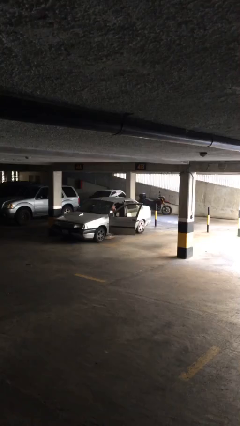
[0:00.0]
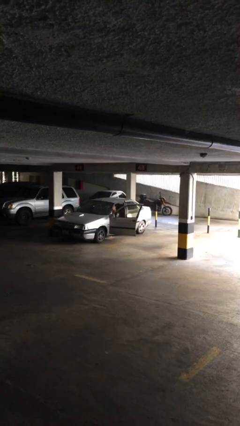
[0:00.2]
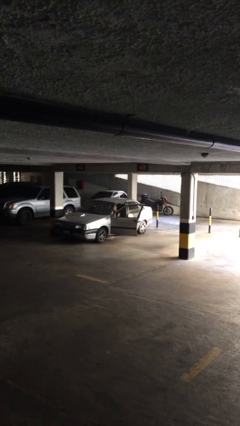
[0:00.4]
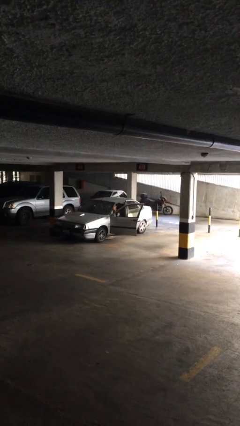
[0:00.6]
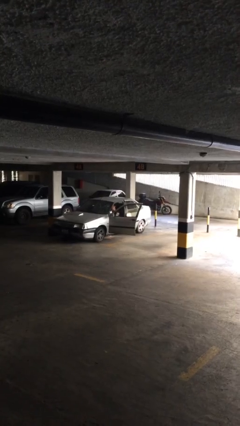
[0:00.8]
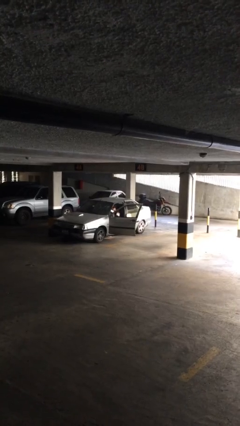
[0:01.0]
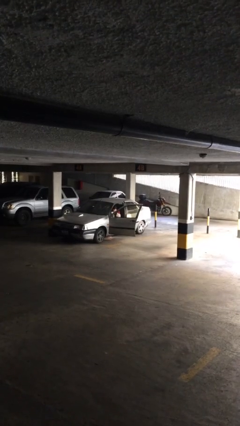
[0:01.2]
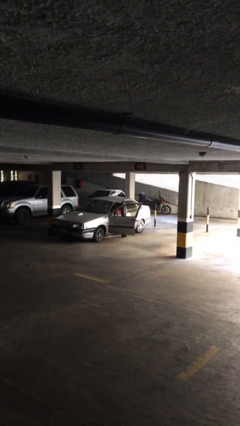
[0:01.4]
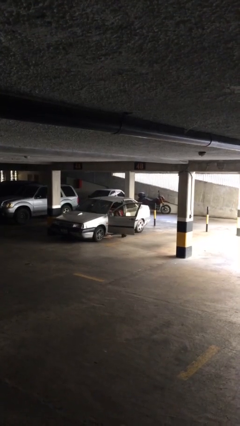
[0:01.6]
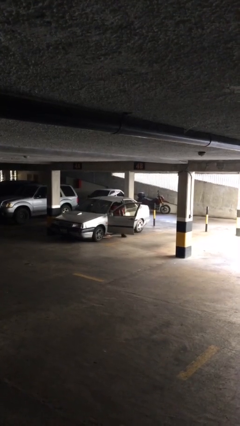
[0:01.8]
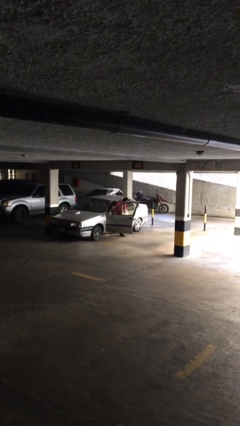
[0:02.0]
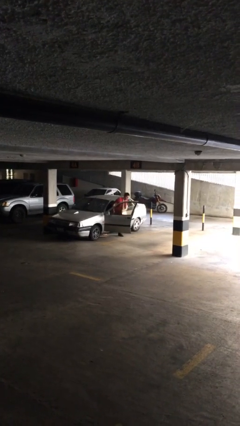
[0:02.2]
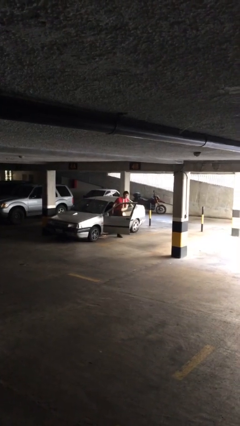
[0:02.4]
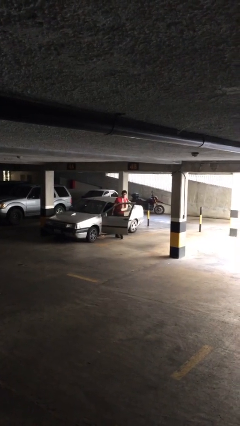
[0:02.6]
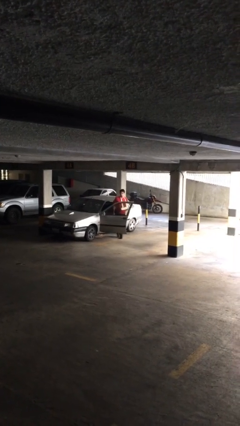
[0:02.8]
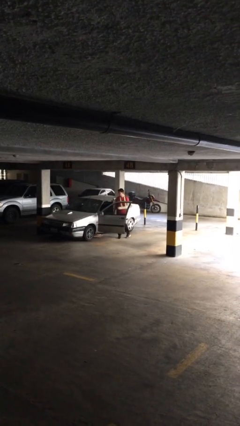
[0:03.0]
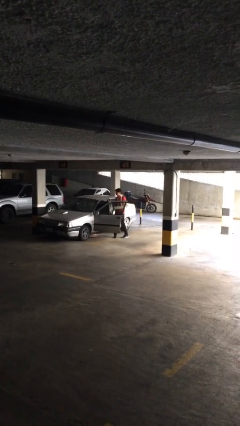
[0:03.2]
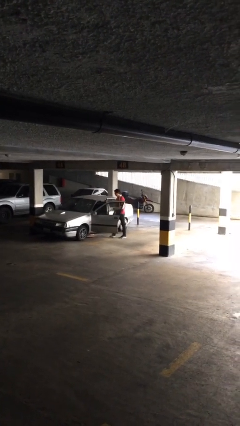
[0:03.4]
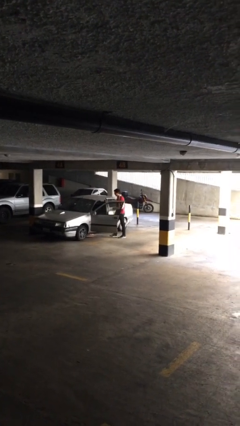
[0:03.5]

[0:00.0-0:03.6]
person exits car

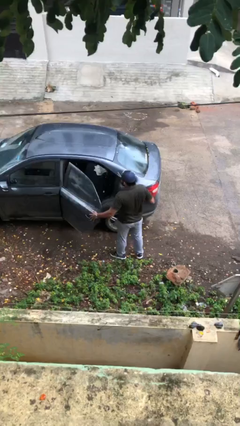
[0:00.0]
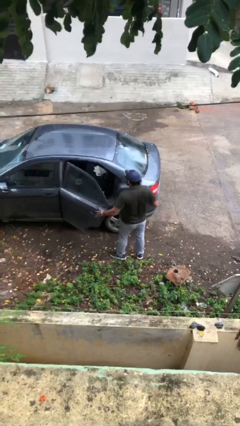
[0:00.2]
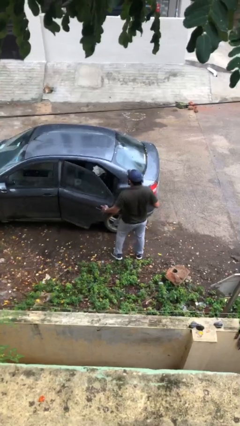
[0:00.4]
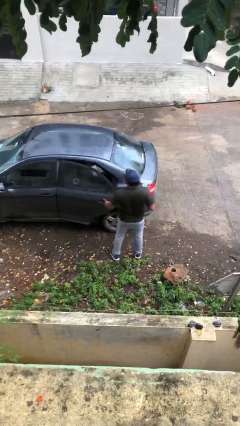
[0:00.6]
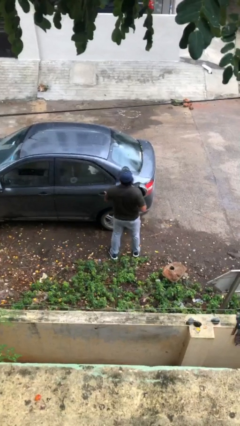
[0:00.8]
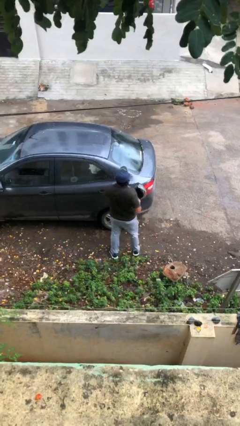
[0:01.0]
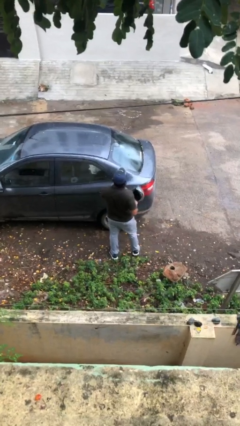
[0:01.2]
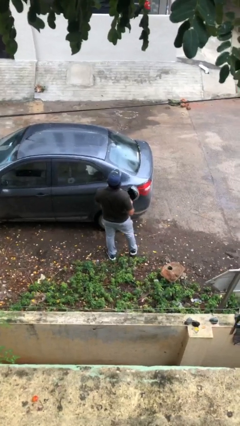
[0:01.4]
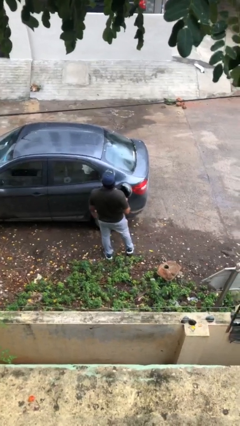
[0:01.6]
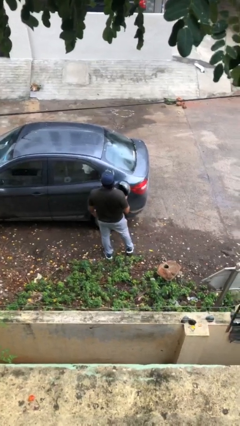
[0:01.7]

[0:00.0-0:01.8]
person closes car door

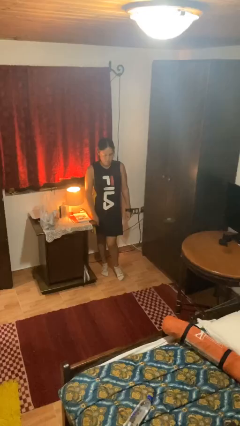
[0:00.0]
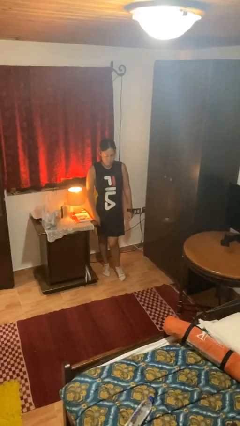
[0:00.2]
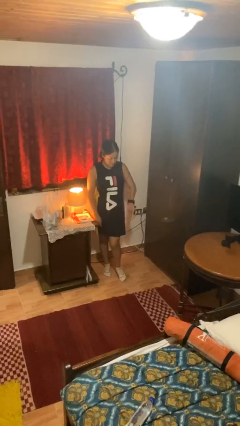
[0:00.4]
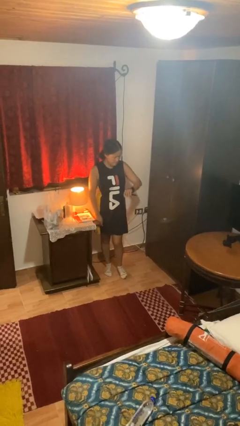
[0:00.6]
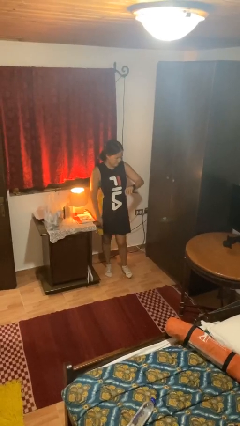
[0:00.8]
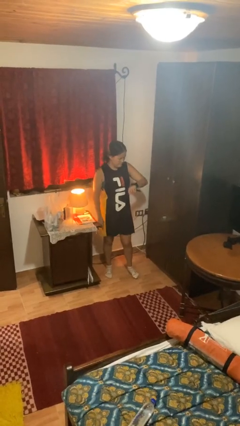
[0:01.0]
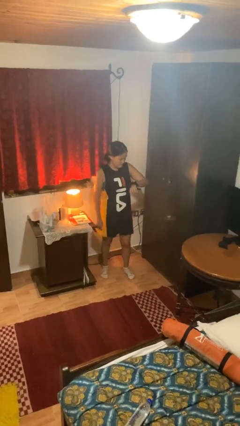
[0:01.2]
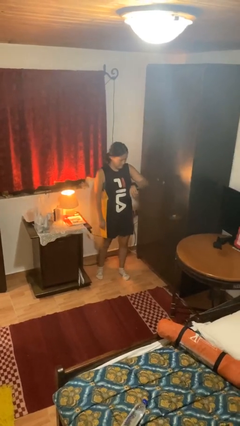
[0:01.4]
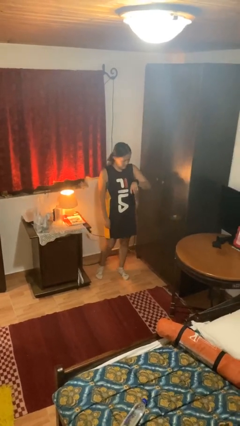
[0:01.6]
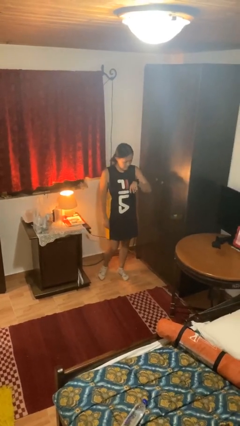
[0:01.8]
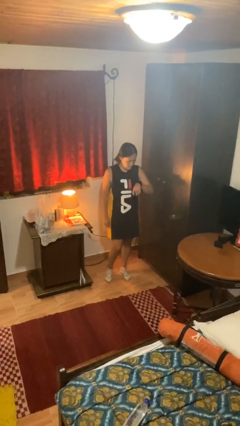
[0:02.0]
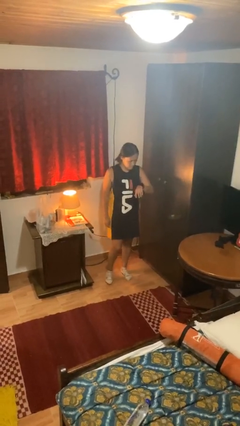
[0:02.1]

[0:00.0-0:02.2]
person looks at wristwatch

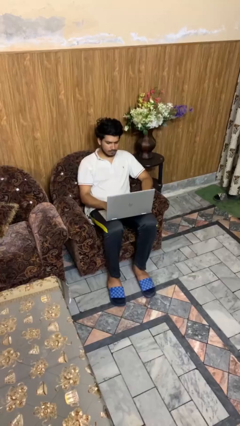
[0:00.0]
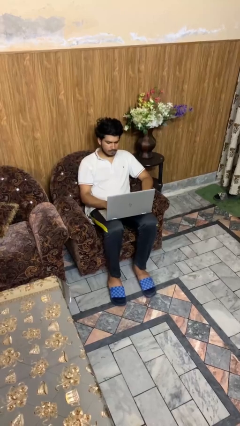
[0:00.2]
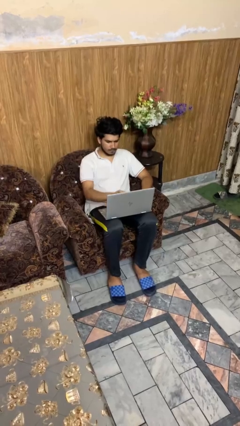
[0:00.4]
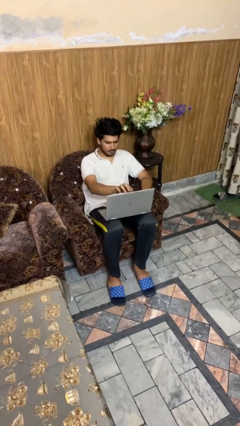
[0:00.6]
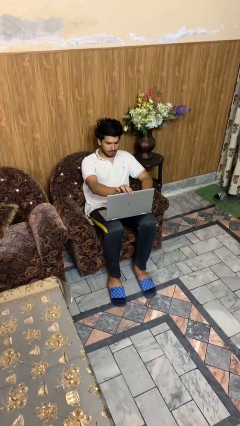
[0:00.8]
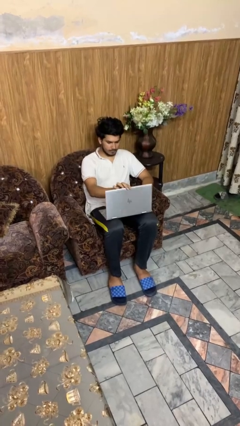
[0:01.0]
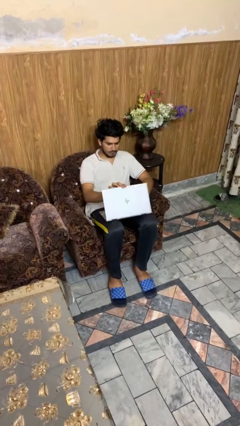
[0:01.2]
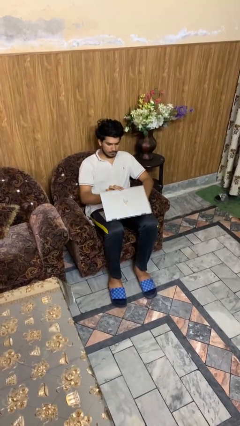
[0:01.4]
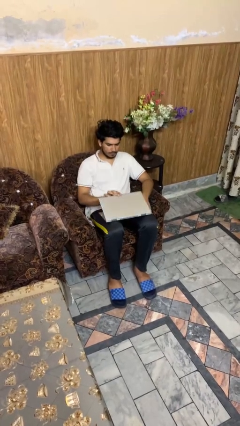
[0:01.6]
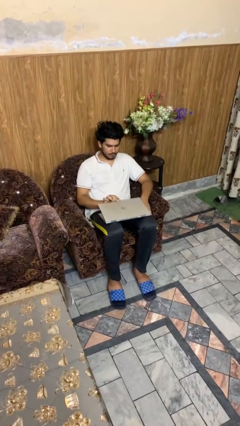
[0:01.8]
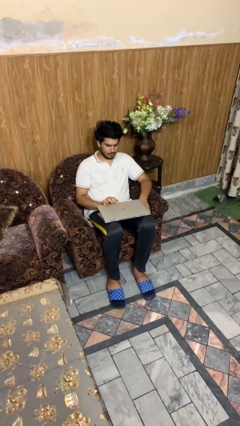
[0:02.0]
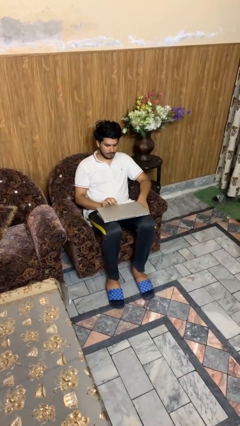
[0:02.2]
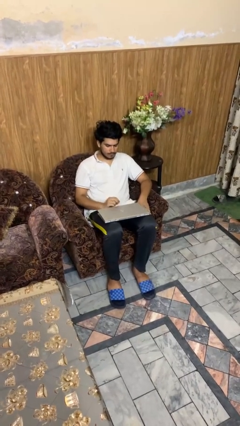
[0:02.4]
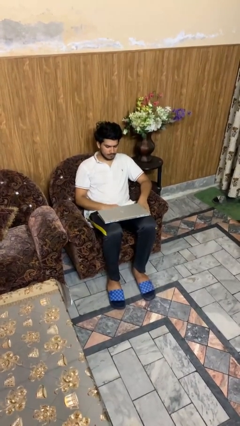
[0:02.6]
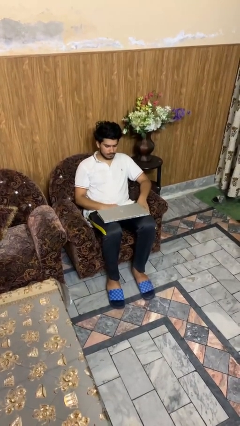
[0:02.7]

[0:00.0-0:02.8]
person closes laptop

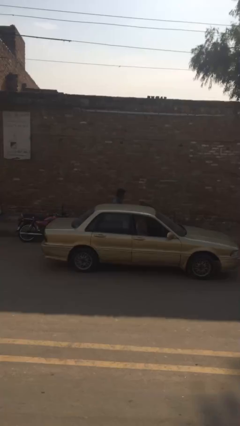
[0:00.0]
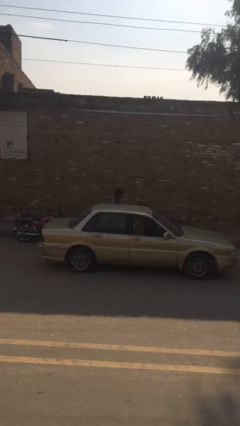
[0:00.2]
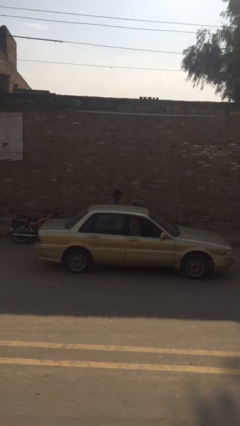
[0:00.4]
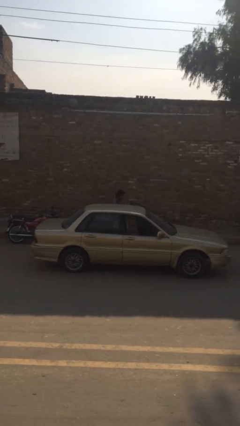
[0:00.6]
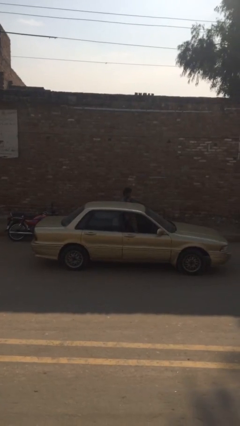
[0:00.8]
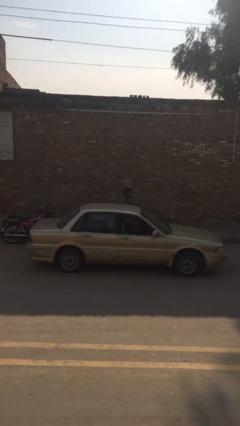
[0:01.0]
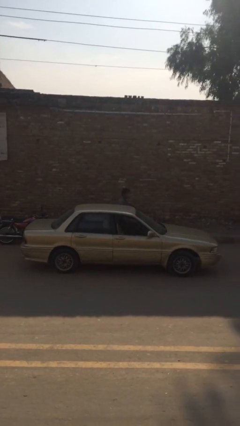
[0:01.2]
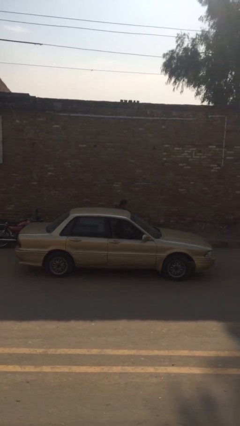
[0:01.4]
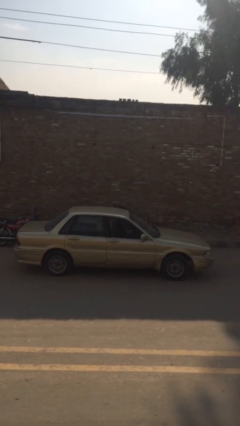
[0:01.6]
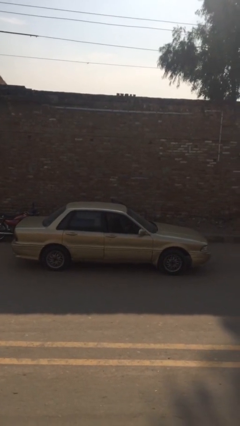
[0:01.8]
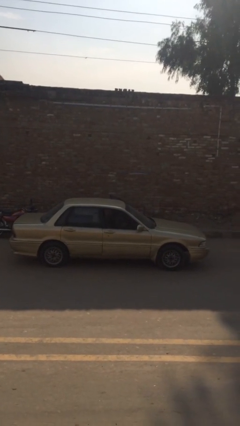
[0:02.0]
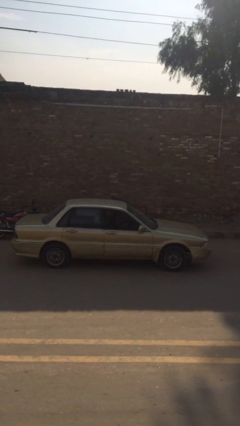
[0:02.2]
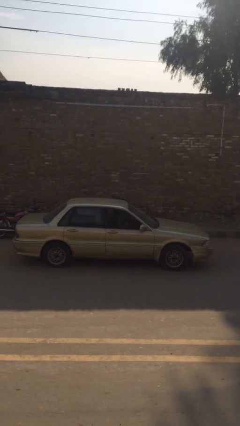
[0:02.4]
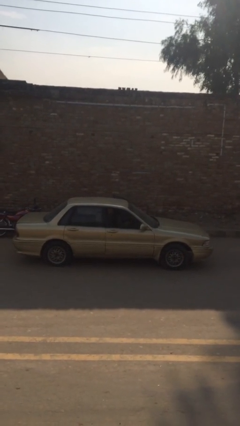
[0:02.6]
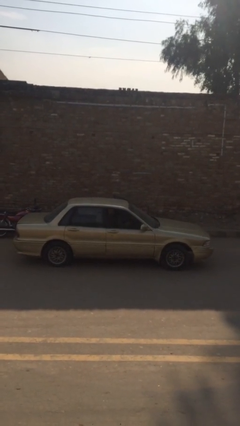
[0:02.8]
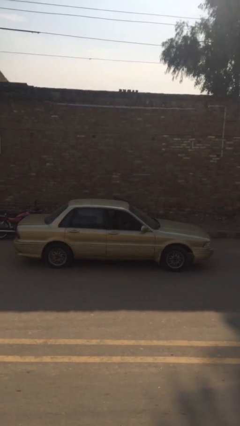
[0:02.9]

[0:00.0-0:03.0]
person enters car

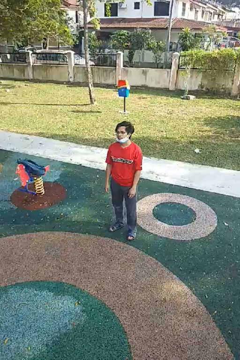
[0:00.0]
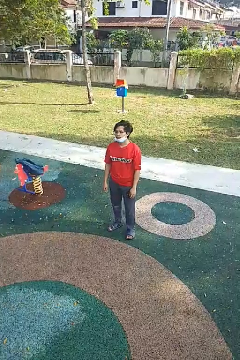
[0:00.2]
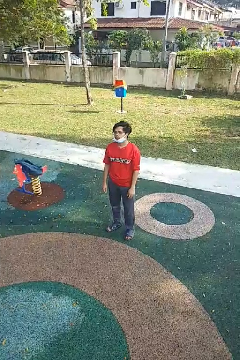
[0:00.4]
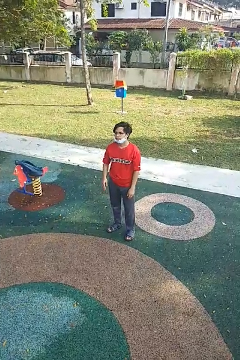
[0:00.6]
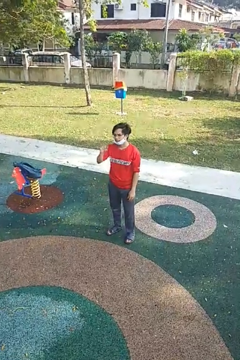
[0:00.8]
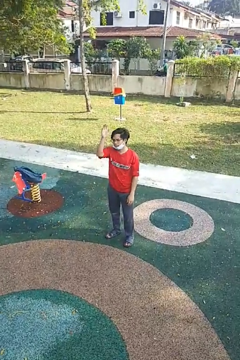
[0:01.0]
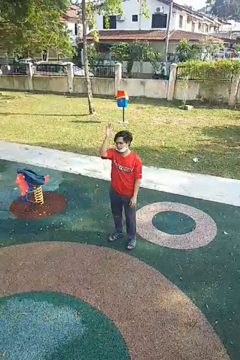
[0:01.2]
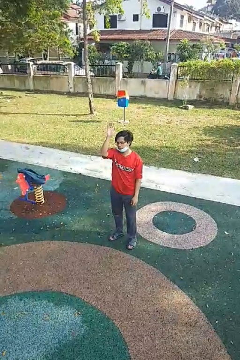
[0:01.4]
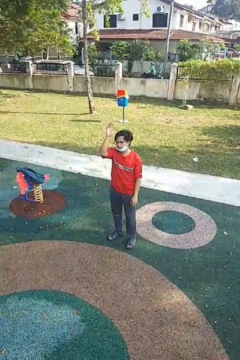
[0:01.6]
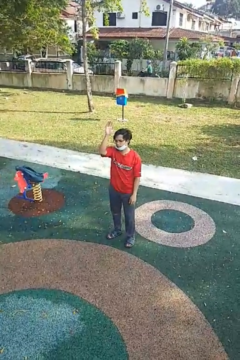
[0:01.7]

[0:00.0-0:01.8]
person gestures raise hand

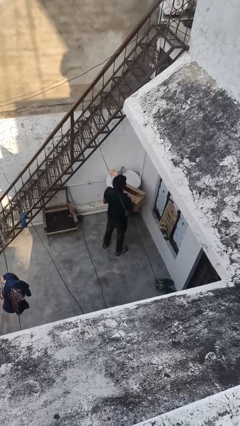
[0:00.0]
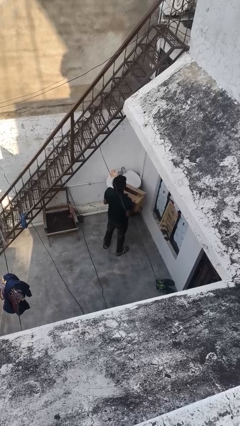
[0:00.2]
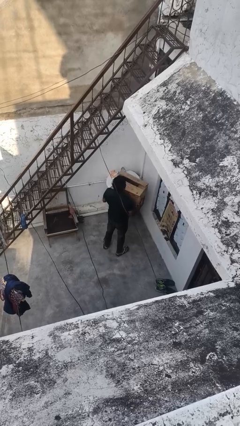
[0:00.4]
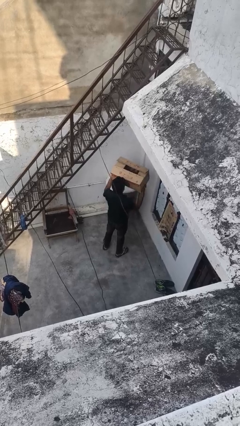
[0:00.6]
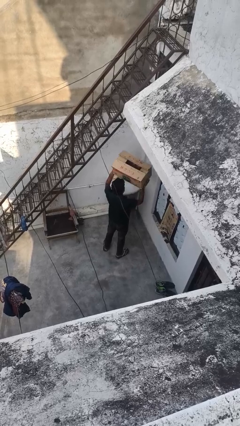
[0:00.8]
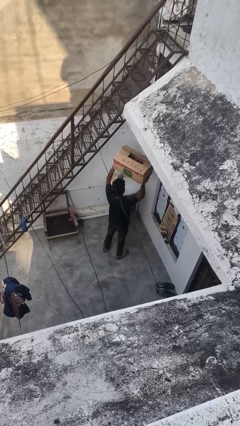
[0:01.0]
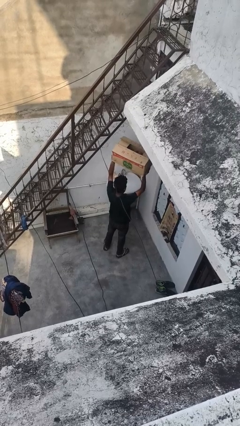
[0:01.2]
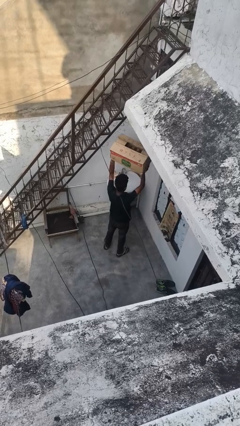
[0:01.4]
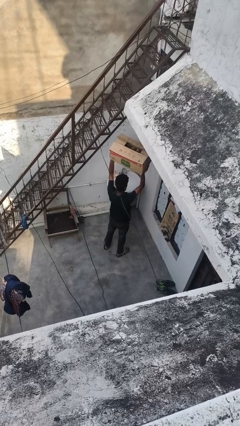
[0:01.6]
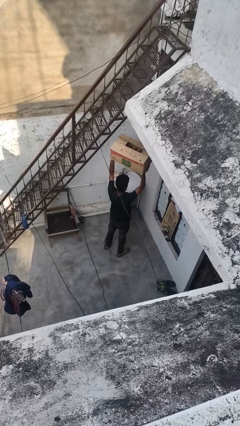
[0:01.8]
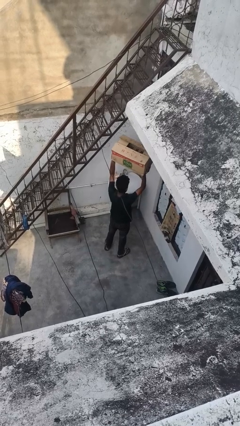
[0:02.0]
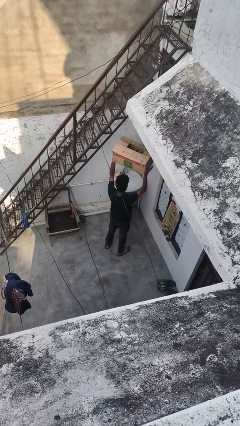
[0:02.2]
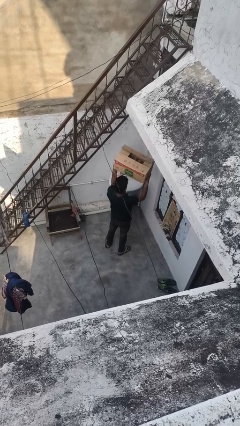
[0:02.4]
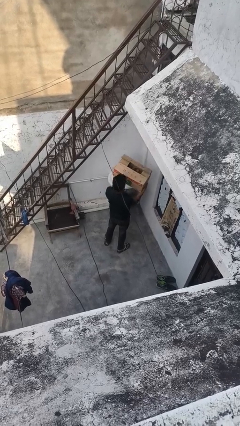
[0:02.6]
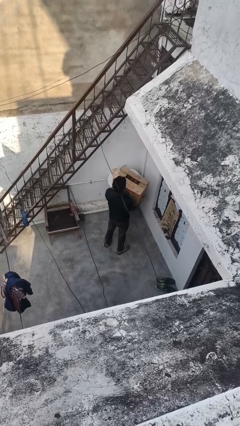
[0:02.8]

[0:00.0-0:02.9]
person holds object above head
